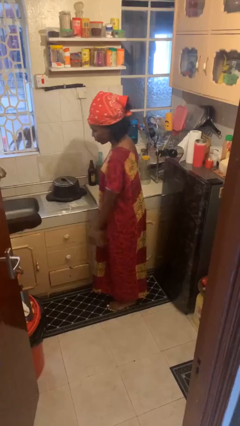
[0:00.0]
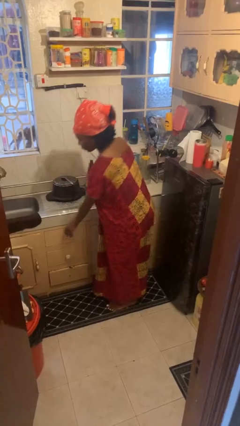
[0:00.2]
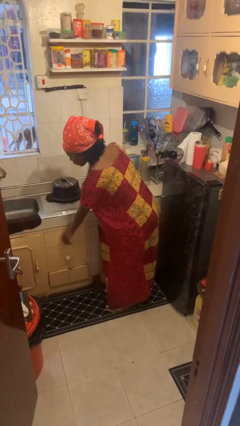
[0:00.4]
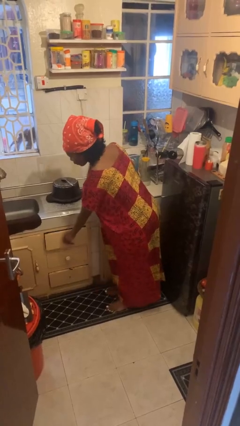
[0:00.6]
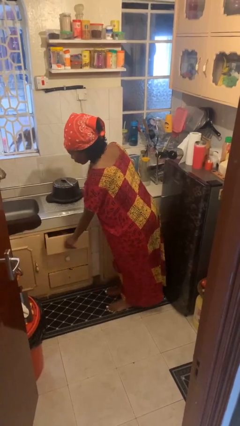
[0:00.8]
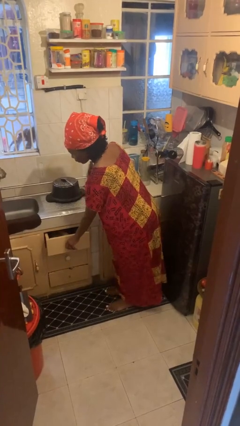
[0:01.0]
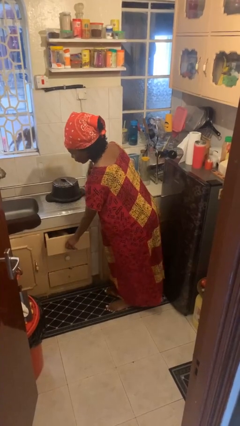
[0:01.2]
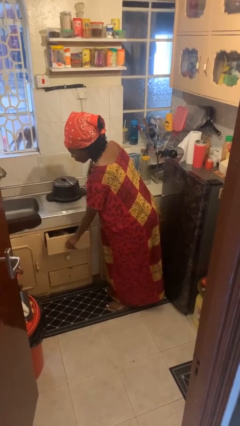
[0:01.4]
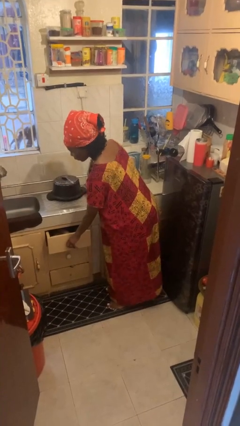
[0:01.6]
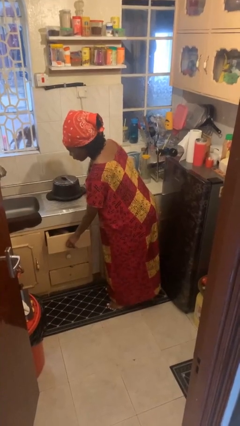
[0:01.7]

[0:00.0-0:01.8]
person opens kitchen drawer

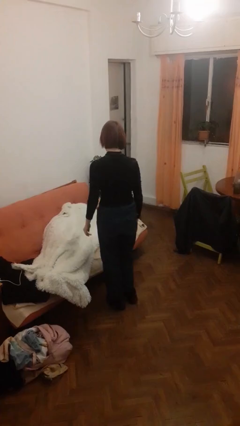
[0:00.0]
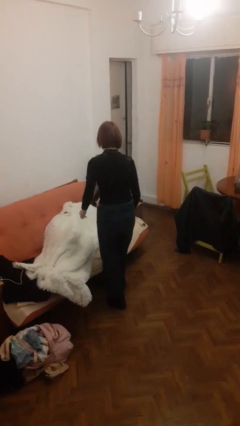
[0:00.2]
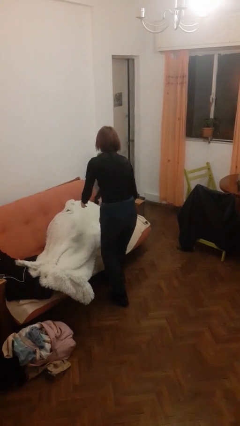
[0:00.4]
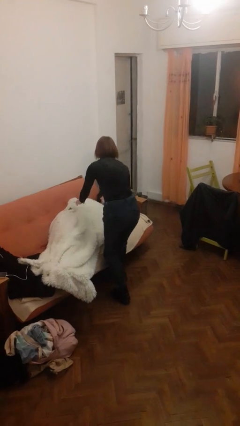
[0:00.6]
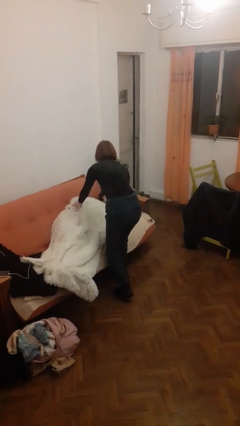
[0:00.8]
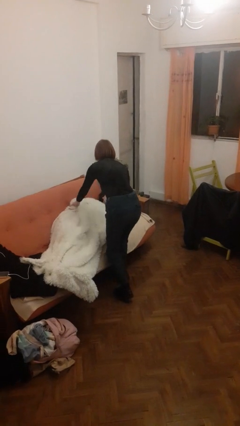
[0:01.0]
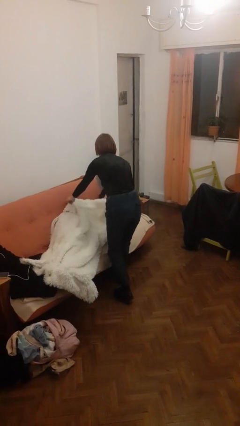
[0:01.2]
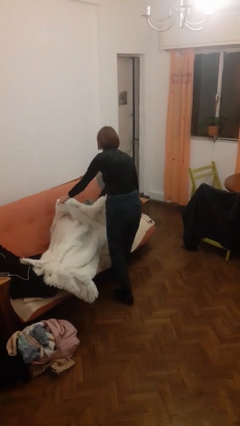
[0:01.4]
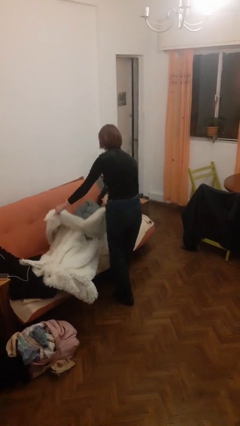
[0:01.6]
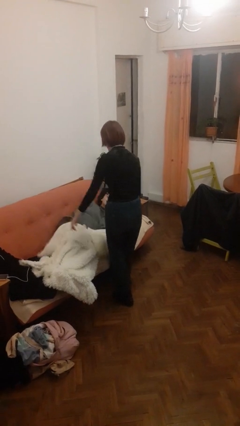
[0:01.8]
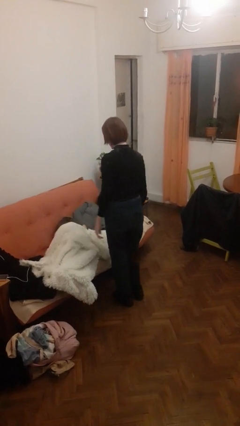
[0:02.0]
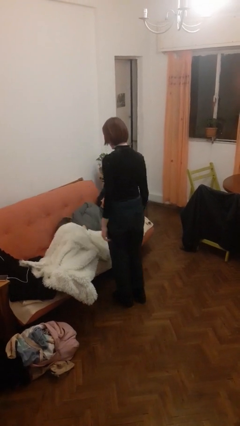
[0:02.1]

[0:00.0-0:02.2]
person uncovers friend with blanket

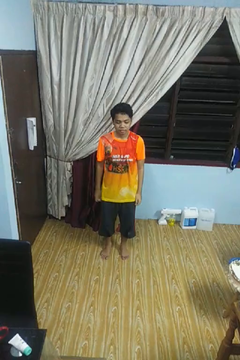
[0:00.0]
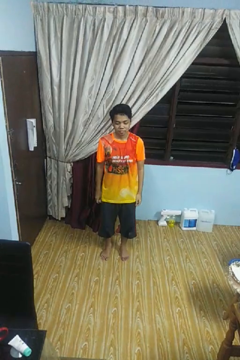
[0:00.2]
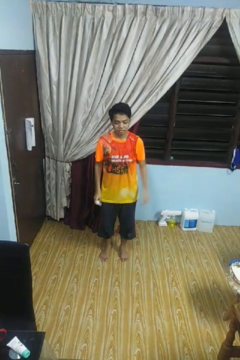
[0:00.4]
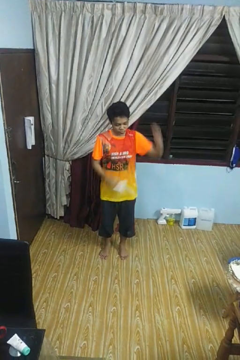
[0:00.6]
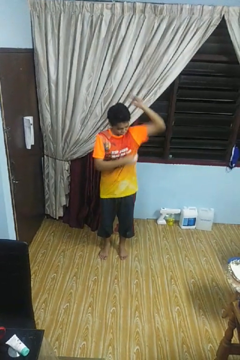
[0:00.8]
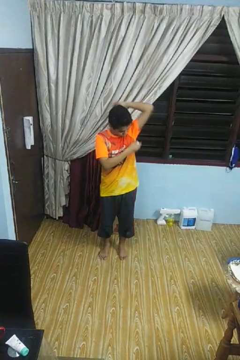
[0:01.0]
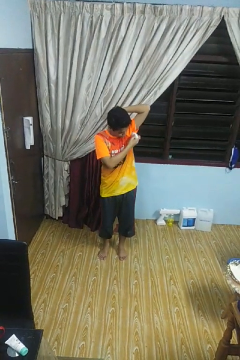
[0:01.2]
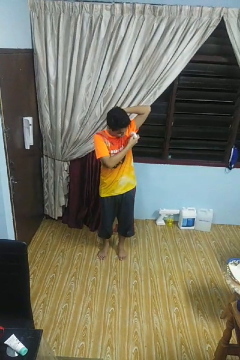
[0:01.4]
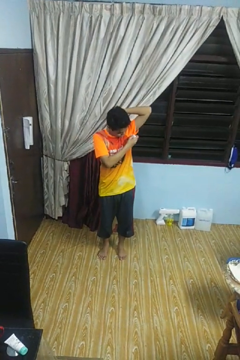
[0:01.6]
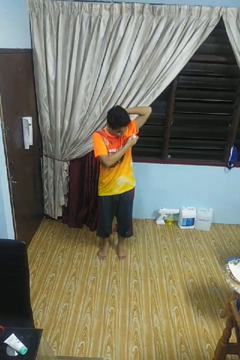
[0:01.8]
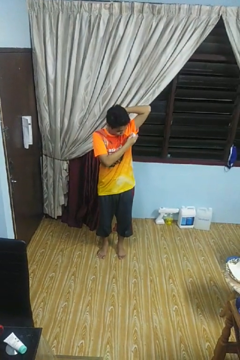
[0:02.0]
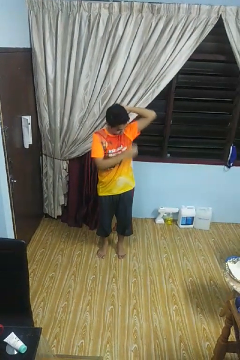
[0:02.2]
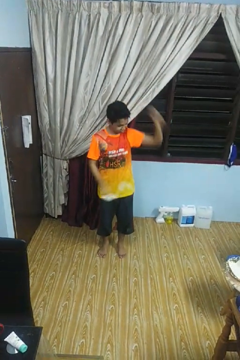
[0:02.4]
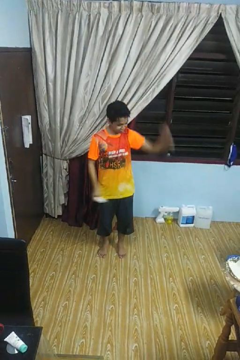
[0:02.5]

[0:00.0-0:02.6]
person applies deodorant

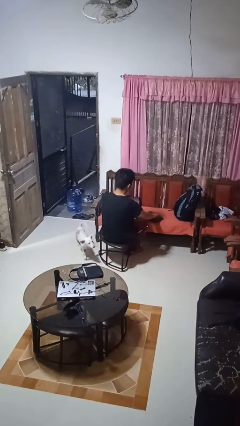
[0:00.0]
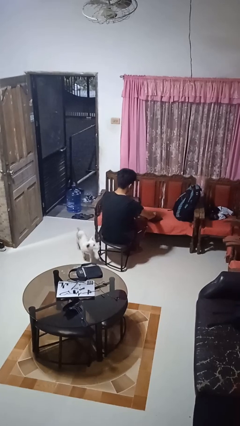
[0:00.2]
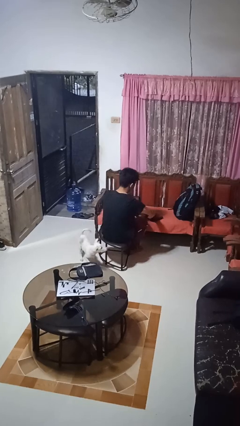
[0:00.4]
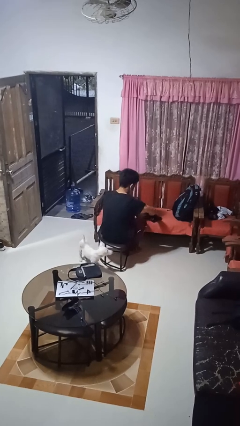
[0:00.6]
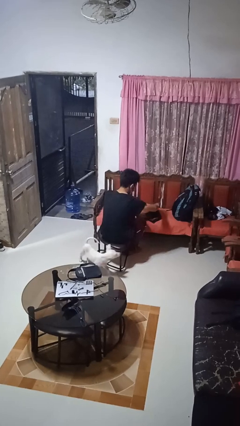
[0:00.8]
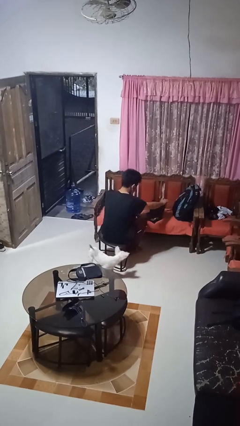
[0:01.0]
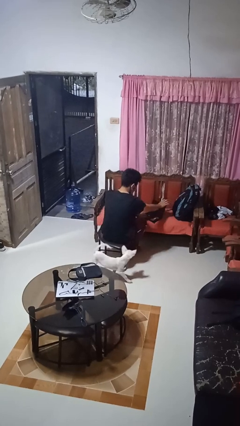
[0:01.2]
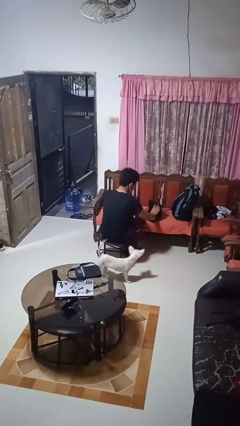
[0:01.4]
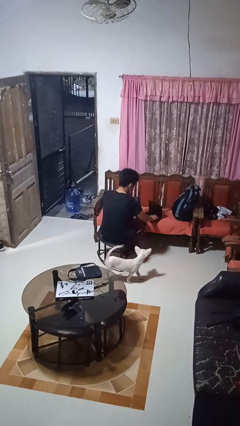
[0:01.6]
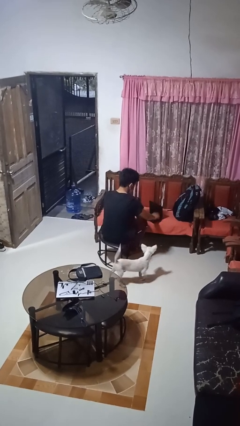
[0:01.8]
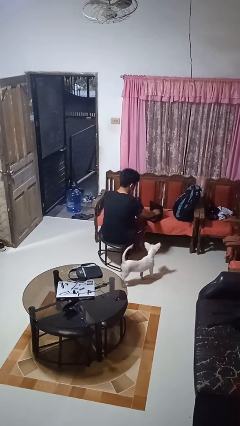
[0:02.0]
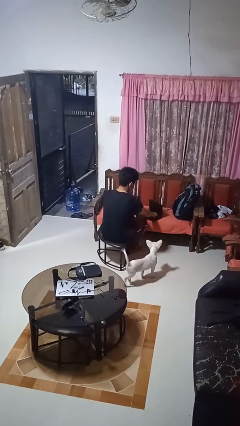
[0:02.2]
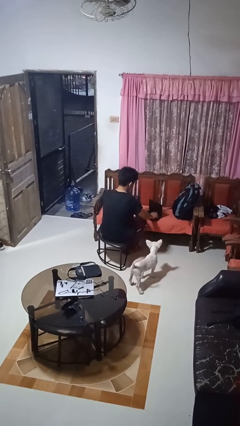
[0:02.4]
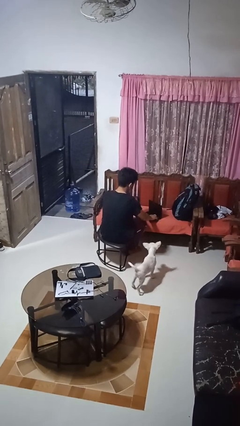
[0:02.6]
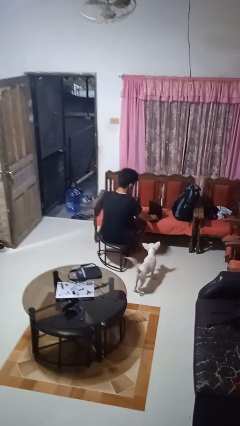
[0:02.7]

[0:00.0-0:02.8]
person opens laptop

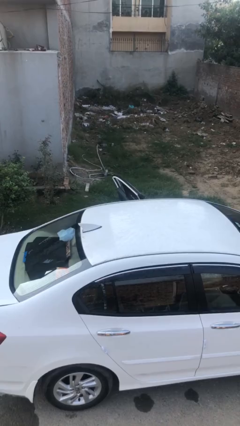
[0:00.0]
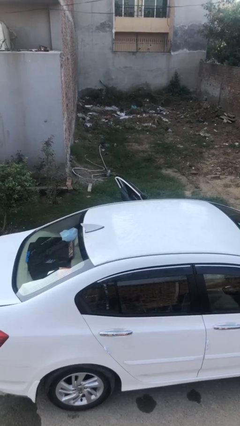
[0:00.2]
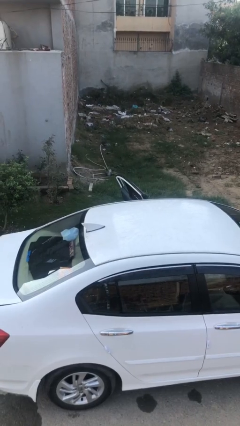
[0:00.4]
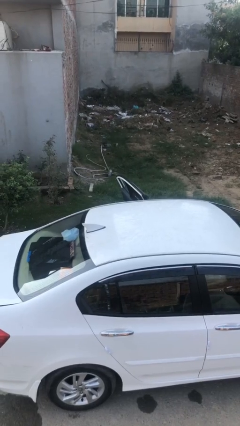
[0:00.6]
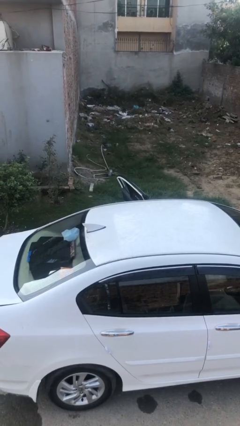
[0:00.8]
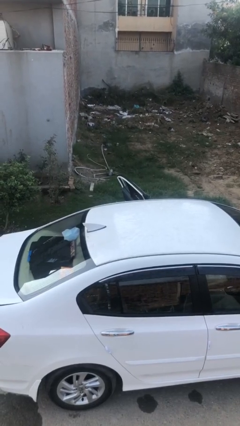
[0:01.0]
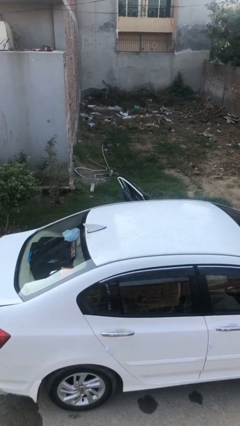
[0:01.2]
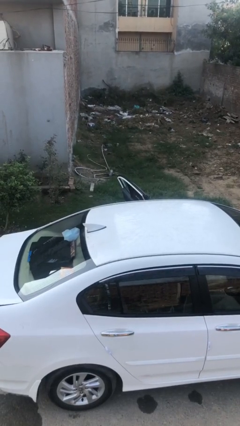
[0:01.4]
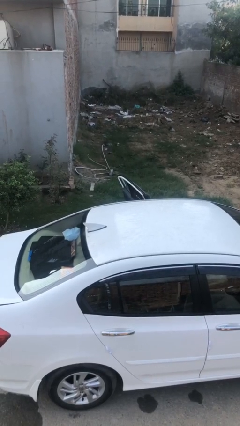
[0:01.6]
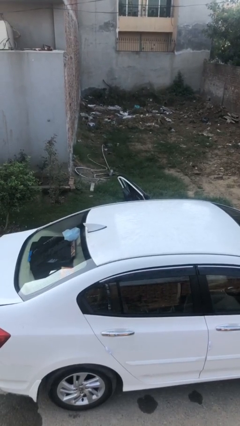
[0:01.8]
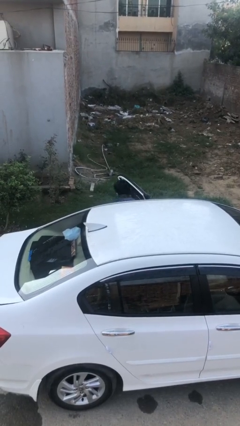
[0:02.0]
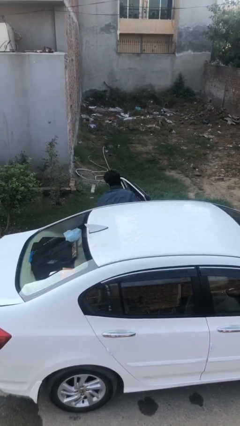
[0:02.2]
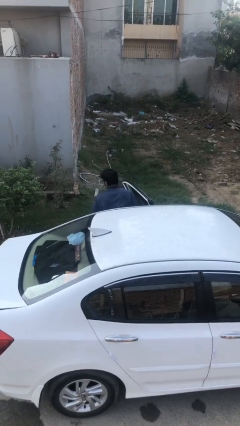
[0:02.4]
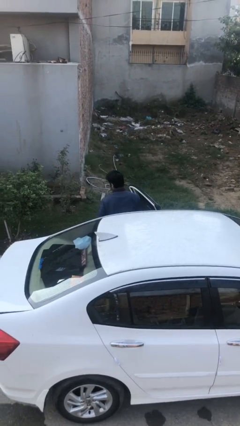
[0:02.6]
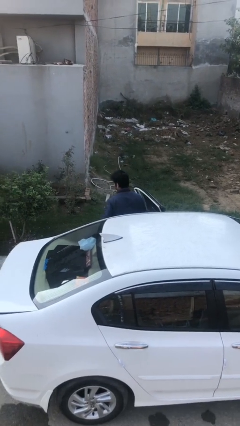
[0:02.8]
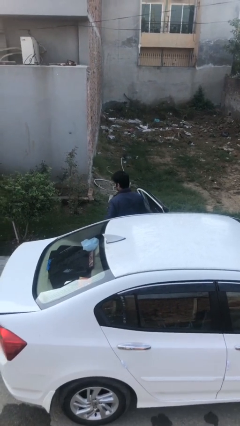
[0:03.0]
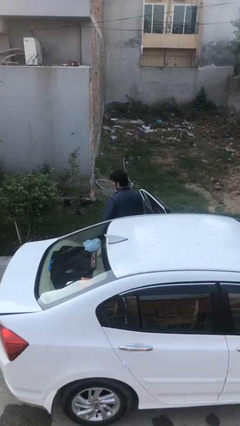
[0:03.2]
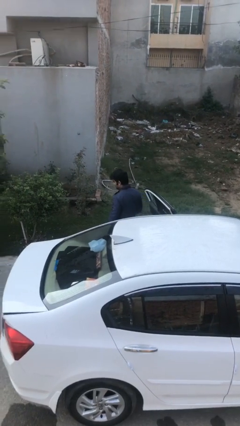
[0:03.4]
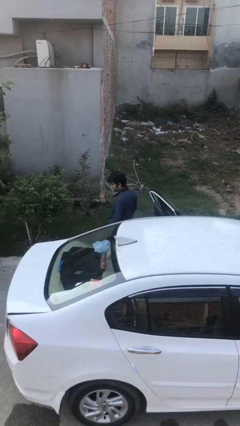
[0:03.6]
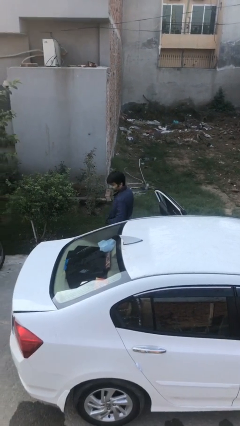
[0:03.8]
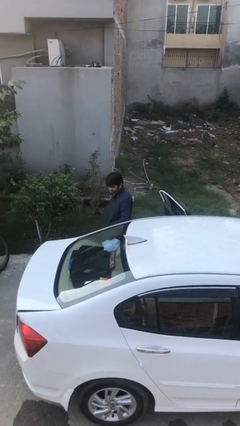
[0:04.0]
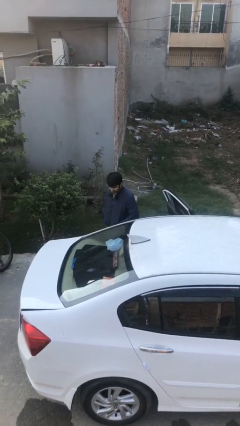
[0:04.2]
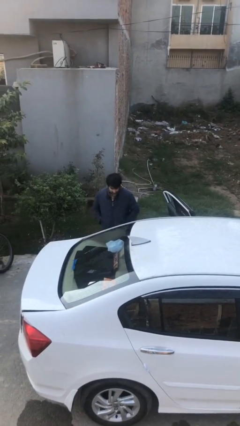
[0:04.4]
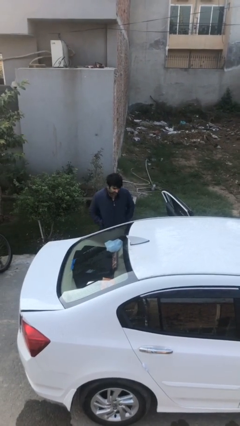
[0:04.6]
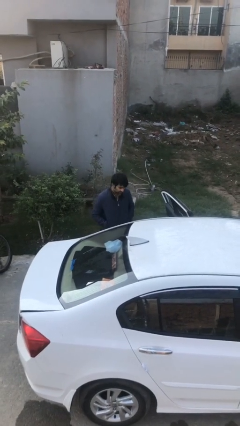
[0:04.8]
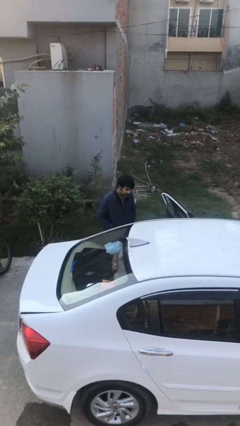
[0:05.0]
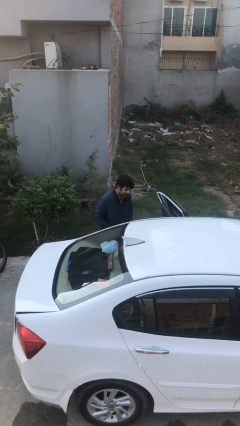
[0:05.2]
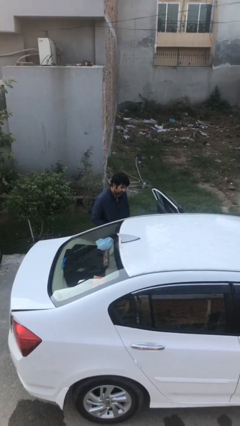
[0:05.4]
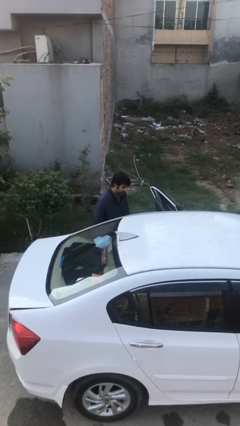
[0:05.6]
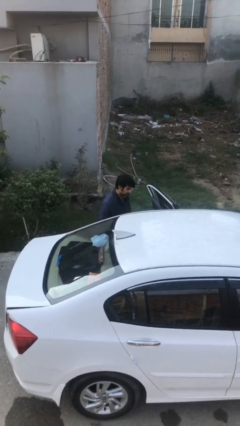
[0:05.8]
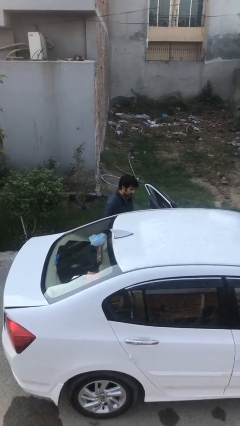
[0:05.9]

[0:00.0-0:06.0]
person exits car

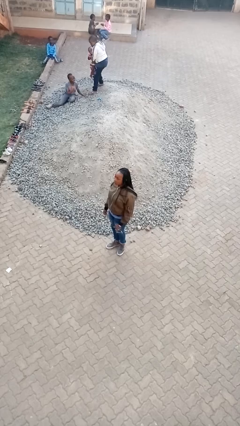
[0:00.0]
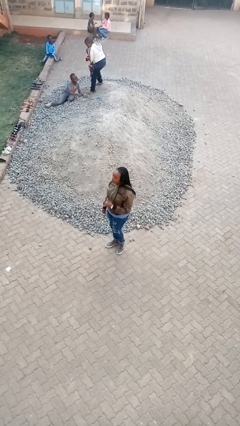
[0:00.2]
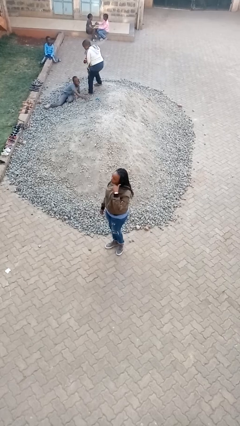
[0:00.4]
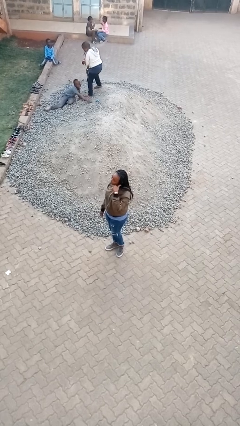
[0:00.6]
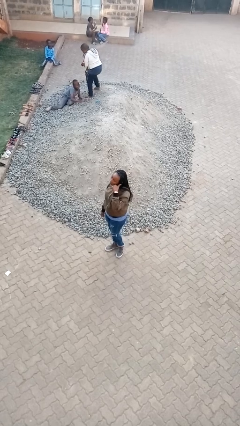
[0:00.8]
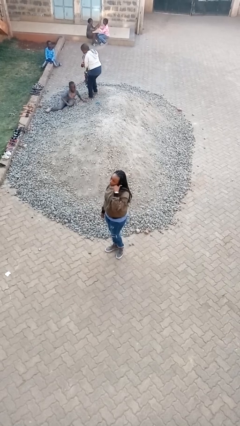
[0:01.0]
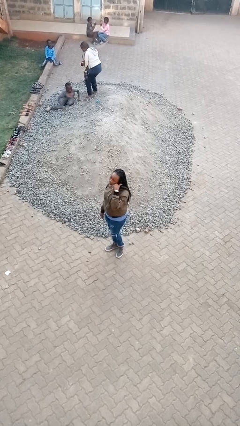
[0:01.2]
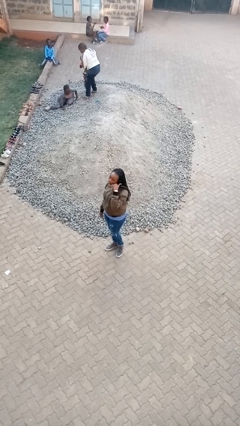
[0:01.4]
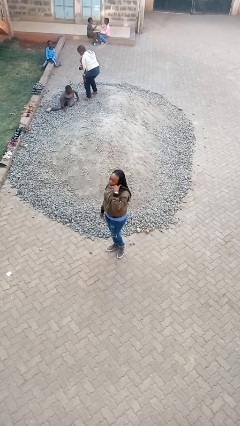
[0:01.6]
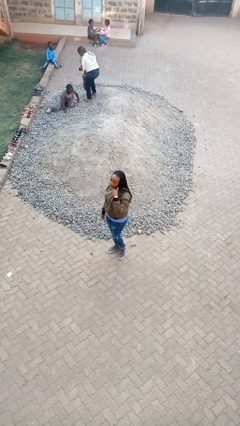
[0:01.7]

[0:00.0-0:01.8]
person gestures call me
